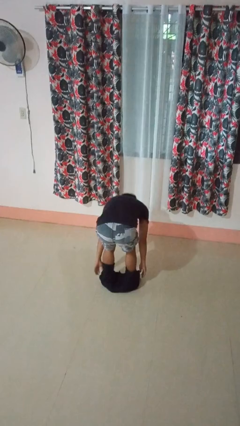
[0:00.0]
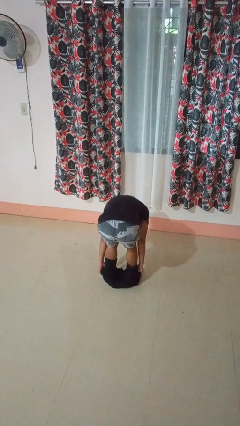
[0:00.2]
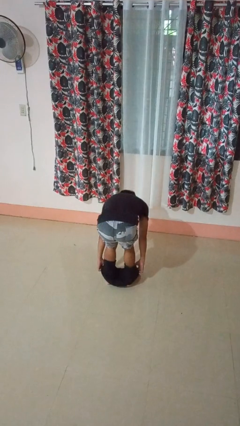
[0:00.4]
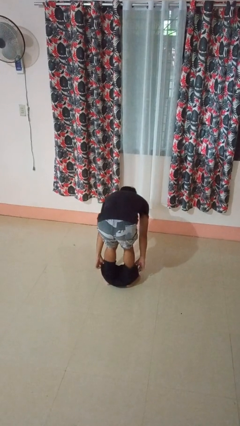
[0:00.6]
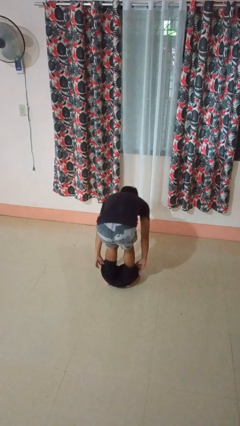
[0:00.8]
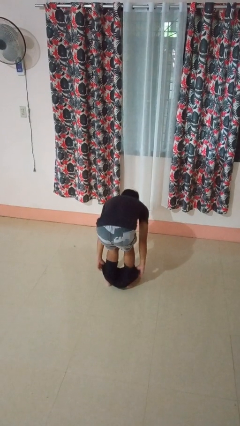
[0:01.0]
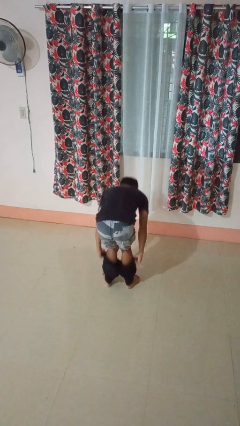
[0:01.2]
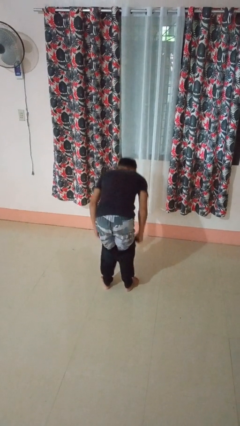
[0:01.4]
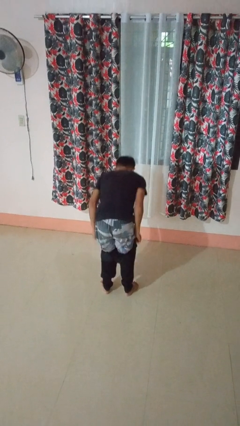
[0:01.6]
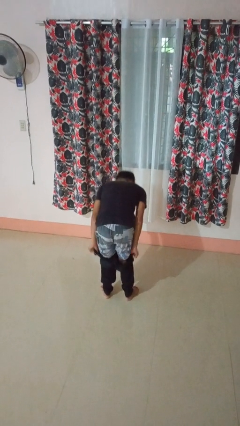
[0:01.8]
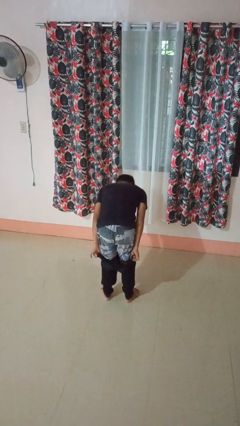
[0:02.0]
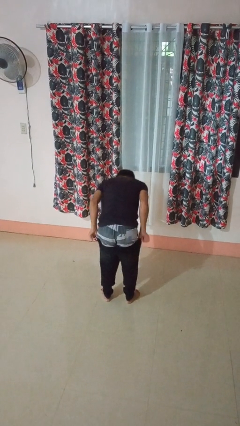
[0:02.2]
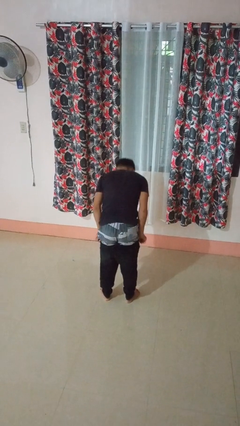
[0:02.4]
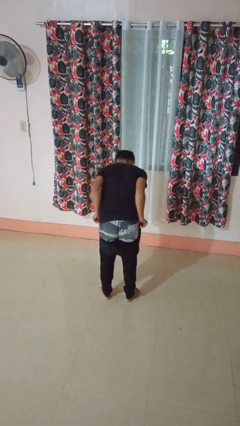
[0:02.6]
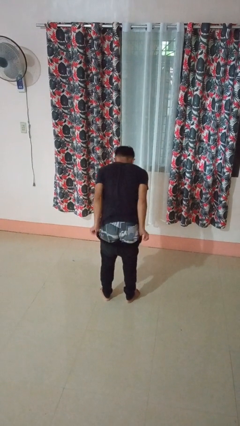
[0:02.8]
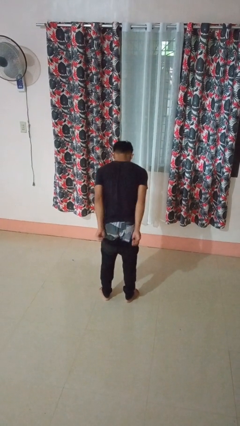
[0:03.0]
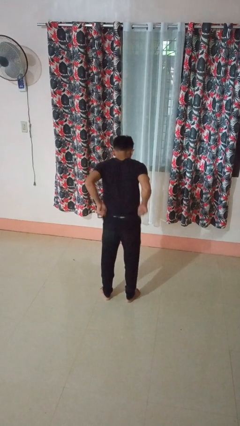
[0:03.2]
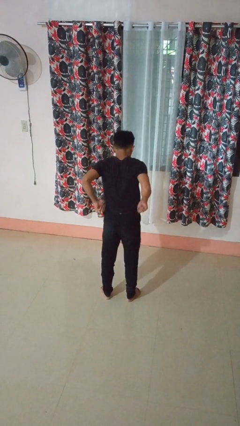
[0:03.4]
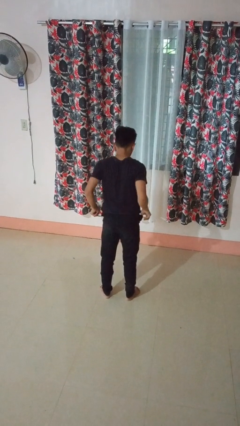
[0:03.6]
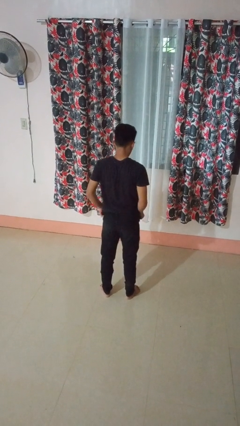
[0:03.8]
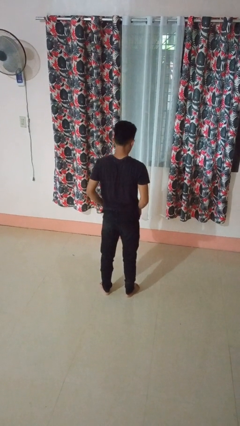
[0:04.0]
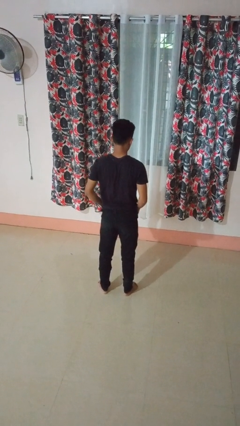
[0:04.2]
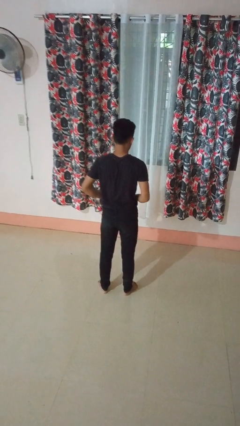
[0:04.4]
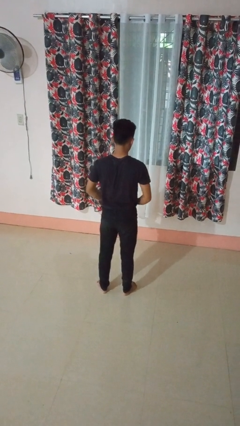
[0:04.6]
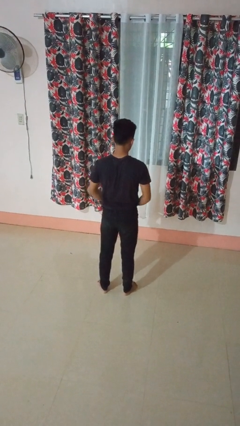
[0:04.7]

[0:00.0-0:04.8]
person puts on pants

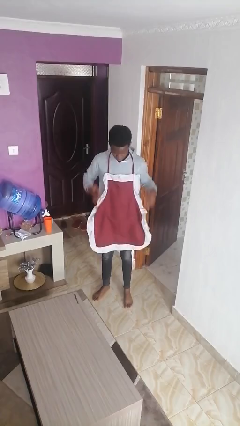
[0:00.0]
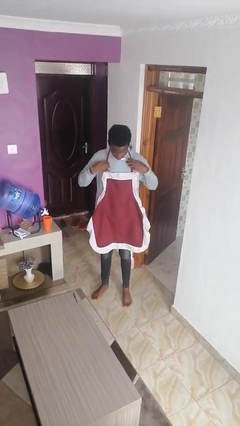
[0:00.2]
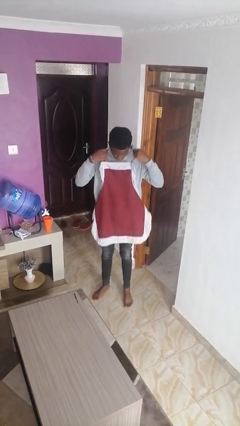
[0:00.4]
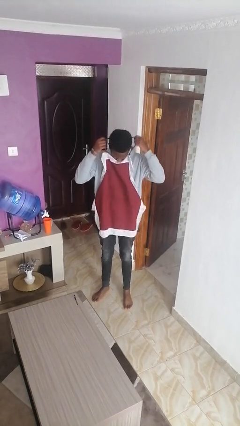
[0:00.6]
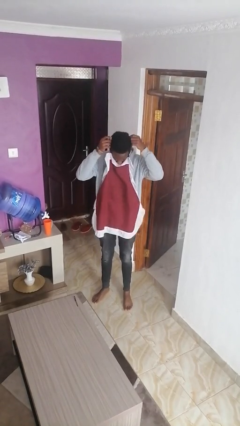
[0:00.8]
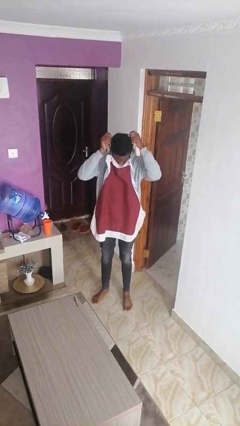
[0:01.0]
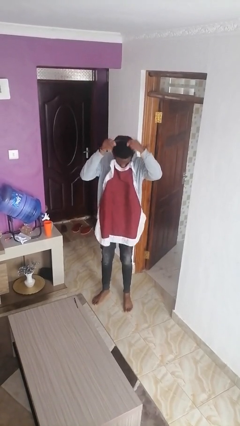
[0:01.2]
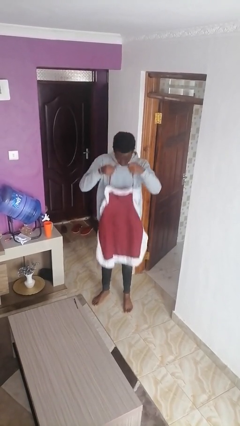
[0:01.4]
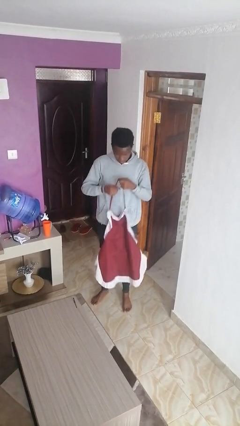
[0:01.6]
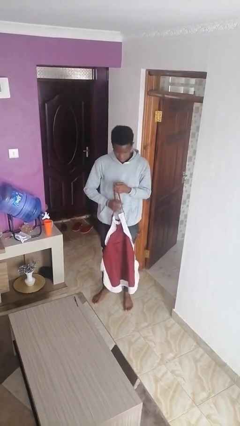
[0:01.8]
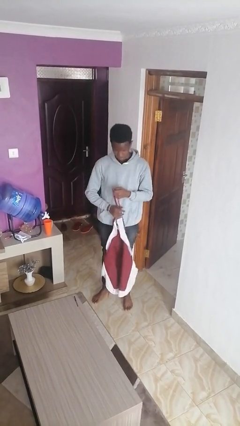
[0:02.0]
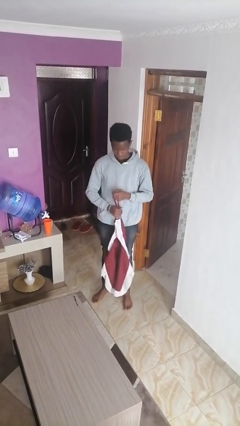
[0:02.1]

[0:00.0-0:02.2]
person takes off apron

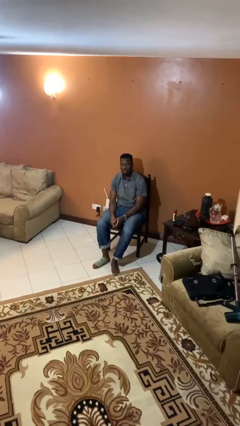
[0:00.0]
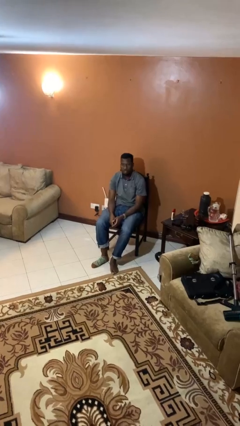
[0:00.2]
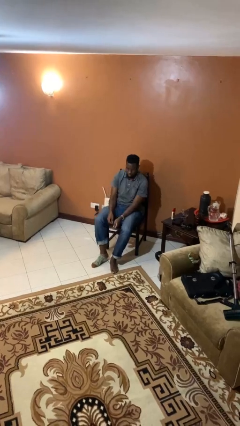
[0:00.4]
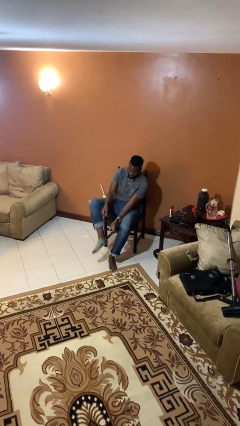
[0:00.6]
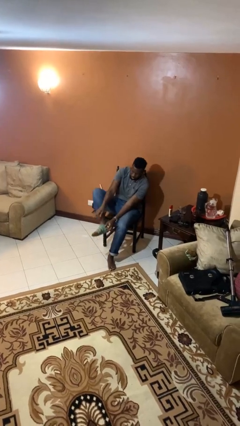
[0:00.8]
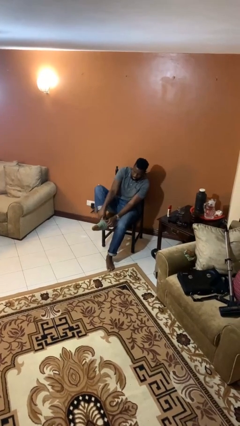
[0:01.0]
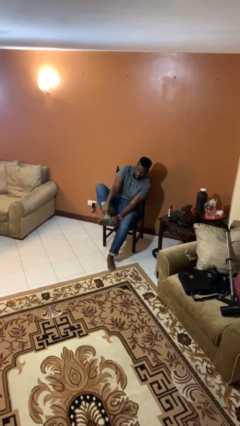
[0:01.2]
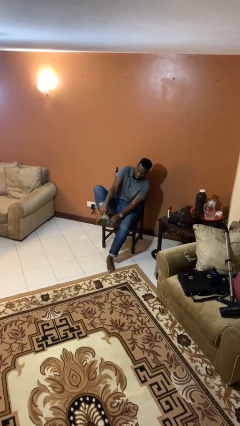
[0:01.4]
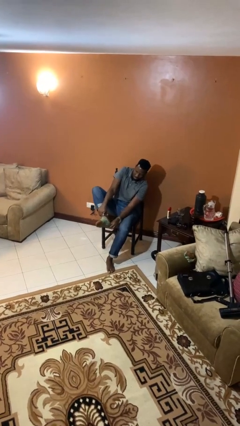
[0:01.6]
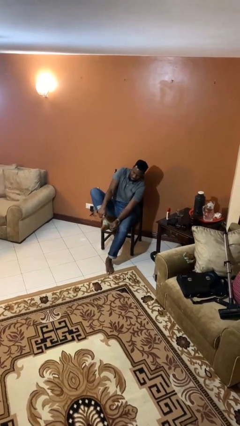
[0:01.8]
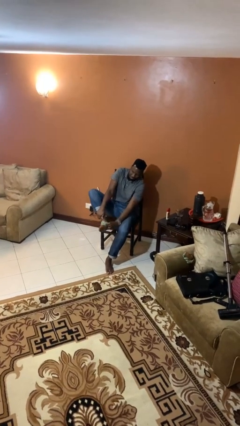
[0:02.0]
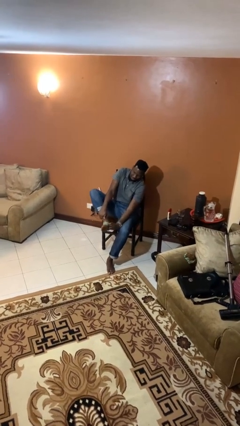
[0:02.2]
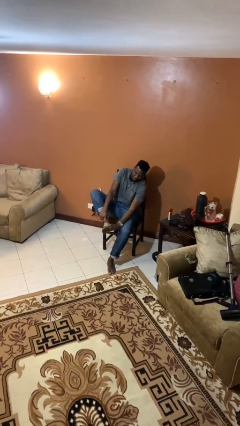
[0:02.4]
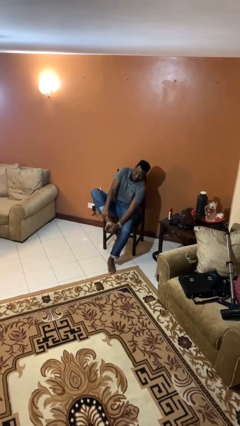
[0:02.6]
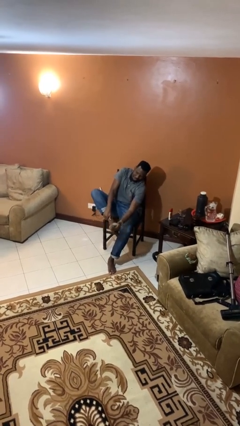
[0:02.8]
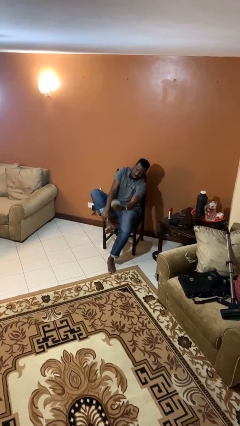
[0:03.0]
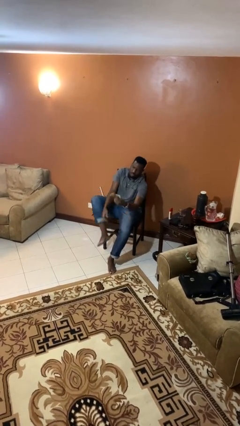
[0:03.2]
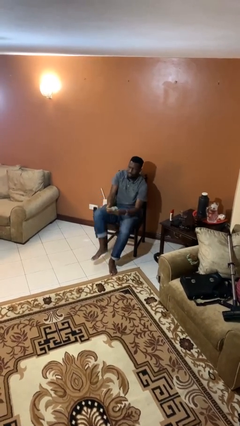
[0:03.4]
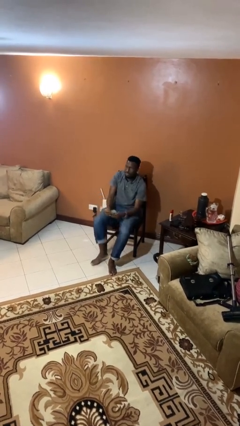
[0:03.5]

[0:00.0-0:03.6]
person takes off socks

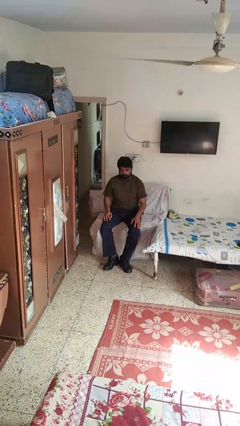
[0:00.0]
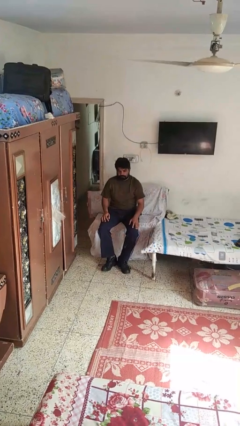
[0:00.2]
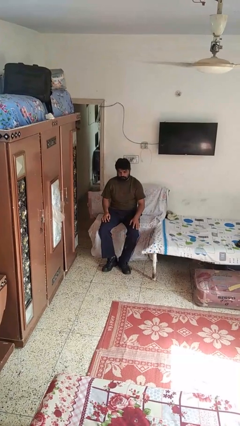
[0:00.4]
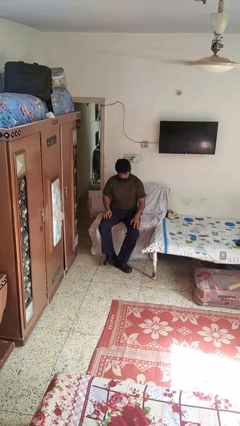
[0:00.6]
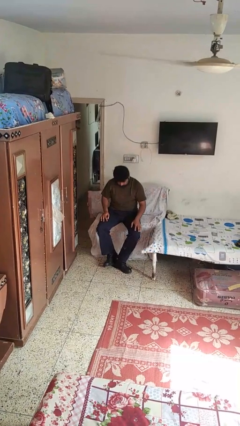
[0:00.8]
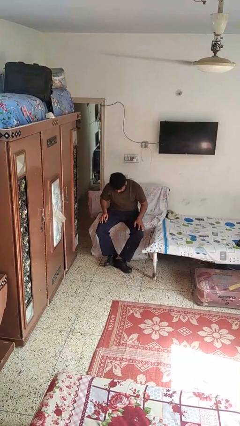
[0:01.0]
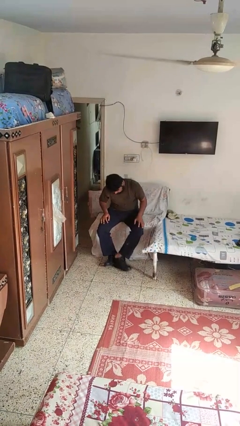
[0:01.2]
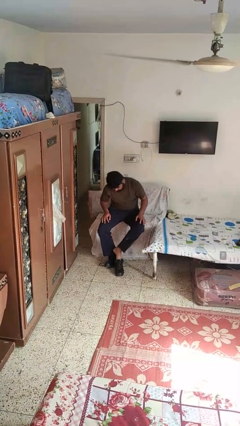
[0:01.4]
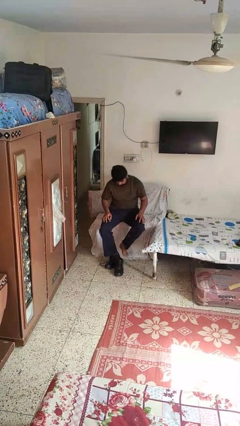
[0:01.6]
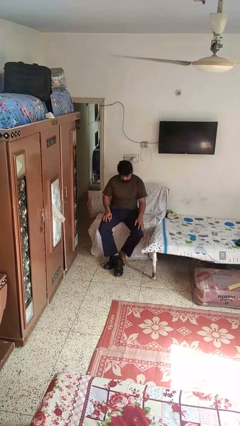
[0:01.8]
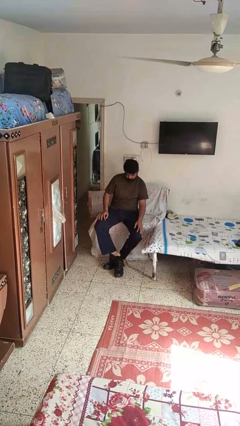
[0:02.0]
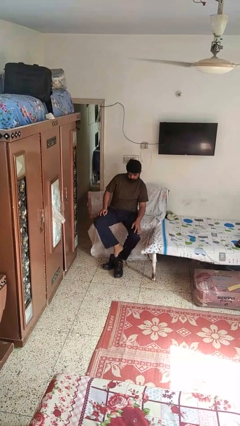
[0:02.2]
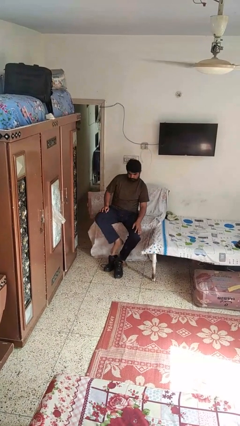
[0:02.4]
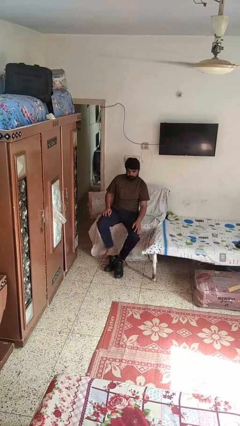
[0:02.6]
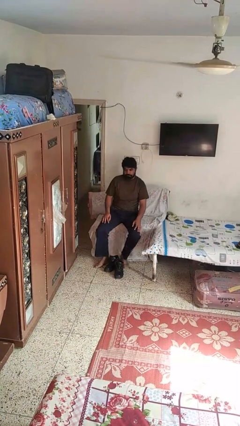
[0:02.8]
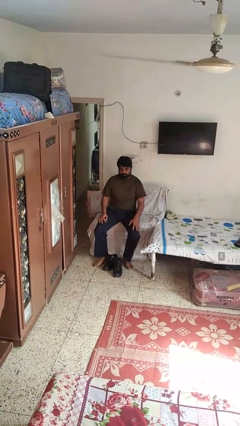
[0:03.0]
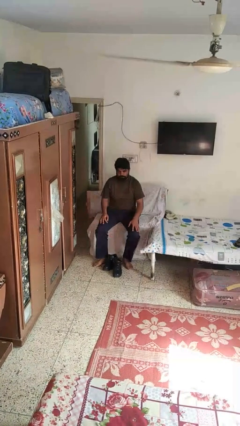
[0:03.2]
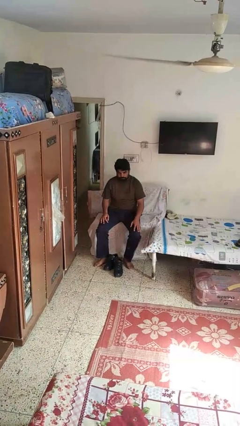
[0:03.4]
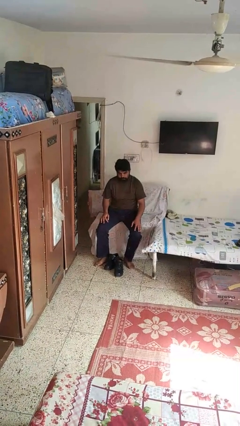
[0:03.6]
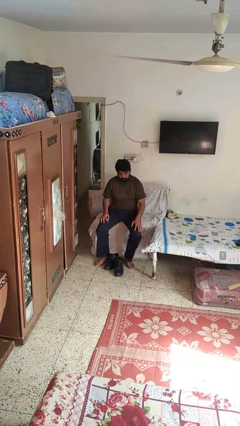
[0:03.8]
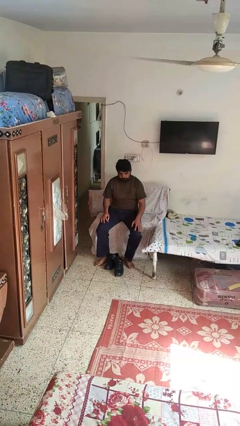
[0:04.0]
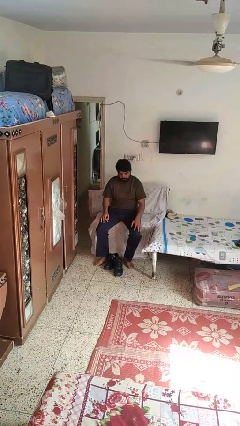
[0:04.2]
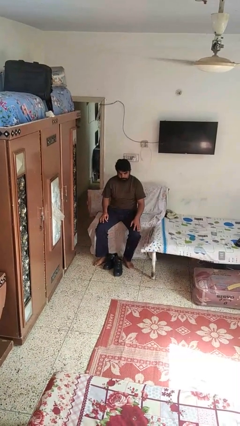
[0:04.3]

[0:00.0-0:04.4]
person takes off boots

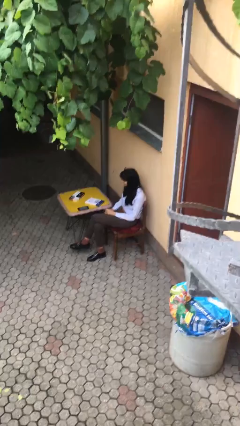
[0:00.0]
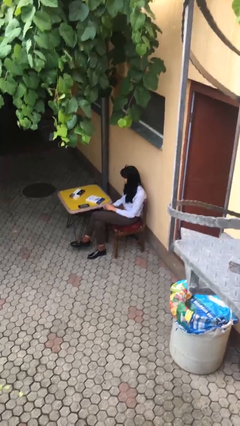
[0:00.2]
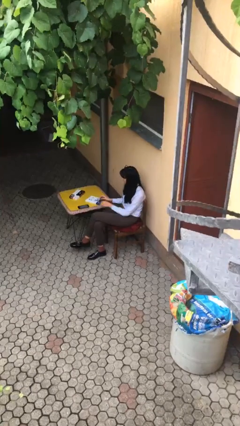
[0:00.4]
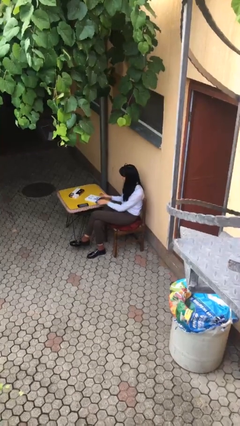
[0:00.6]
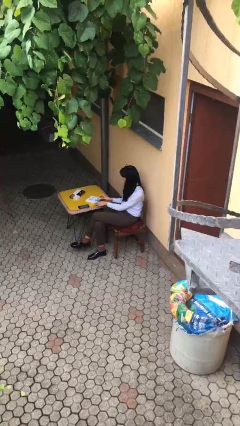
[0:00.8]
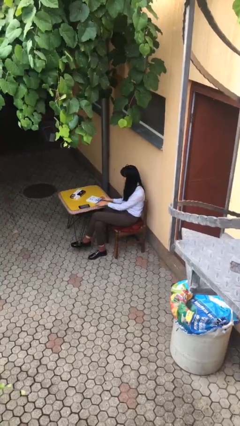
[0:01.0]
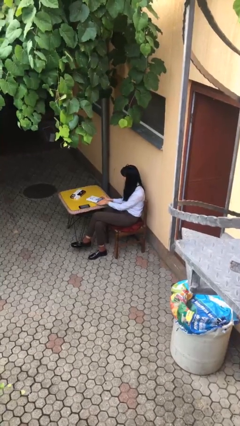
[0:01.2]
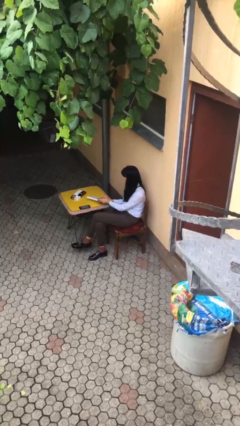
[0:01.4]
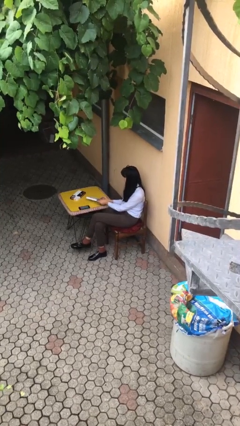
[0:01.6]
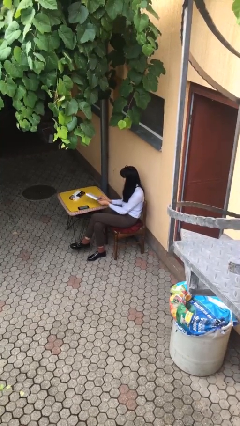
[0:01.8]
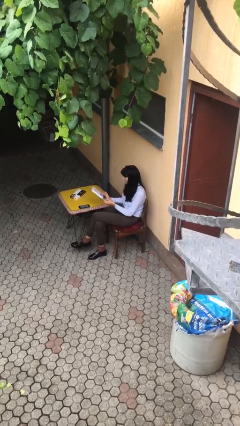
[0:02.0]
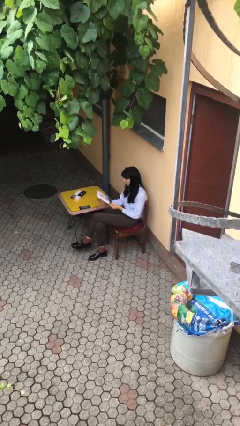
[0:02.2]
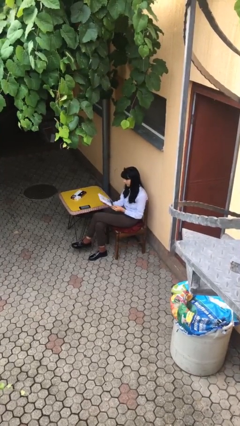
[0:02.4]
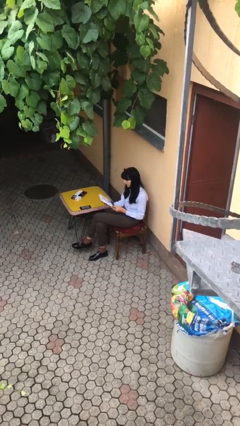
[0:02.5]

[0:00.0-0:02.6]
person picks up object from table
